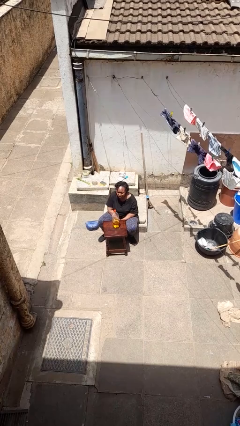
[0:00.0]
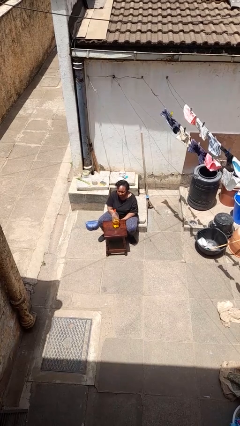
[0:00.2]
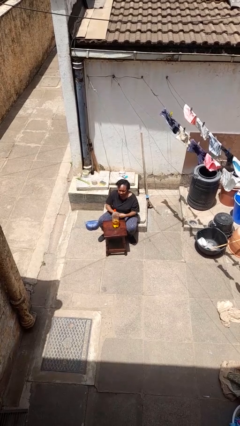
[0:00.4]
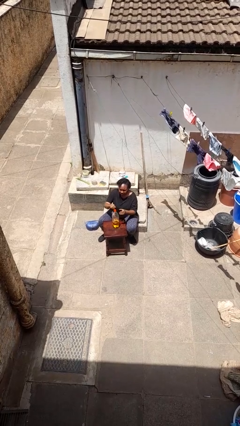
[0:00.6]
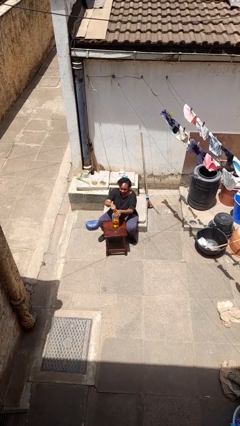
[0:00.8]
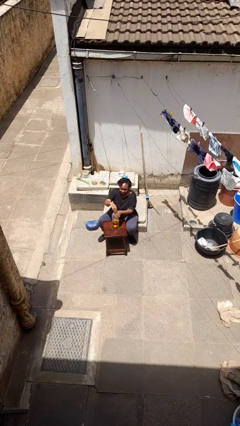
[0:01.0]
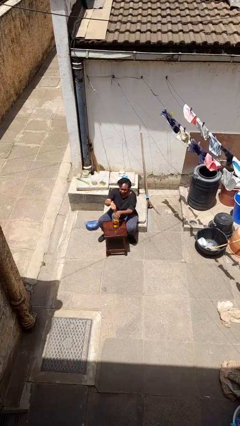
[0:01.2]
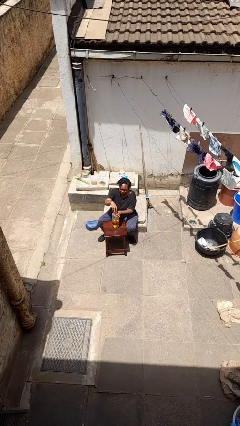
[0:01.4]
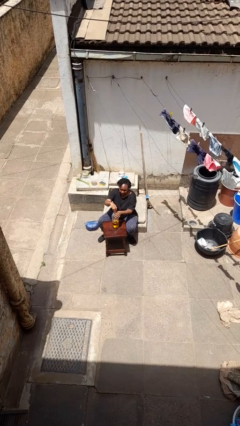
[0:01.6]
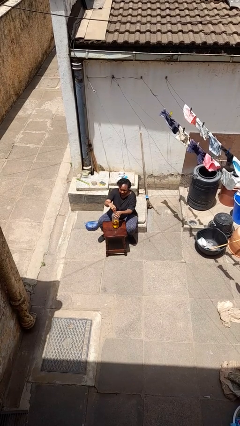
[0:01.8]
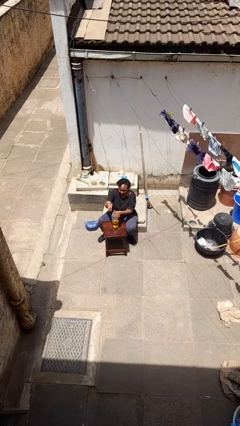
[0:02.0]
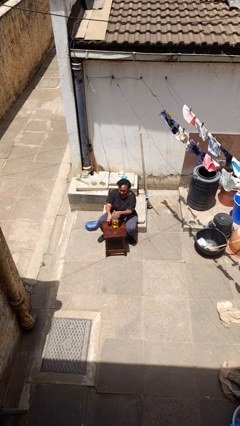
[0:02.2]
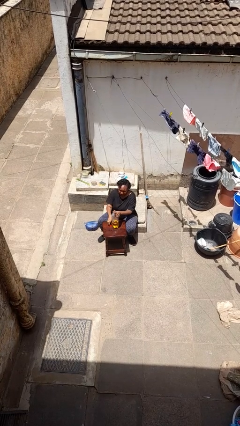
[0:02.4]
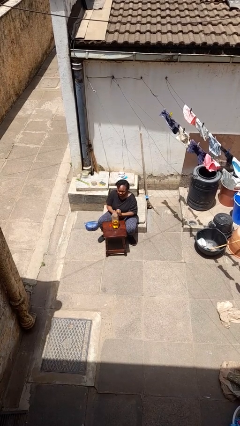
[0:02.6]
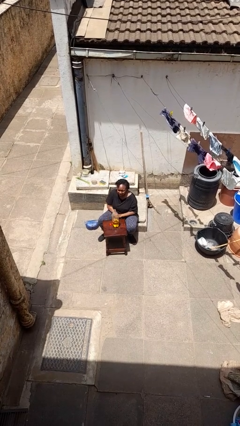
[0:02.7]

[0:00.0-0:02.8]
person unscrews lid from bottle

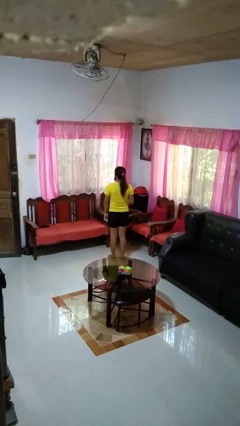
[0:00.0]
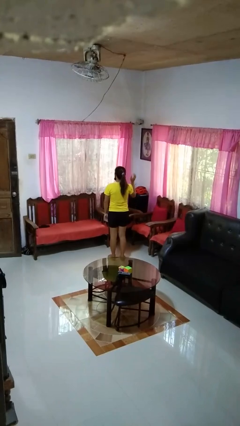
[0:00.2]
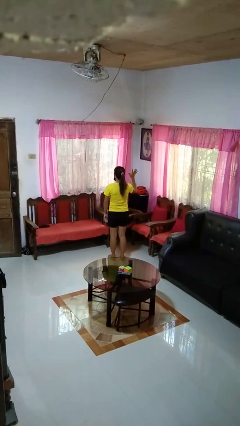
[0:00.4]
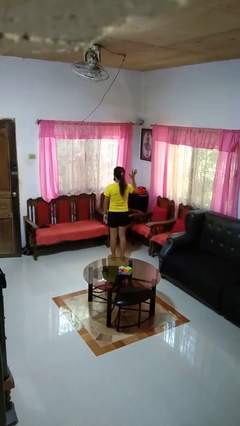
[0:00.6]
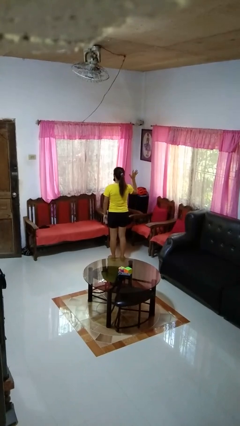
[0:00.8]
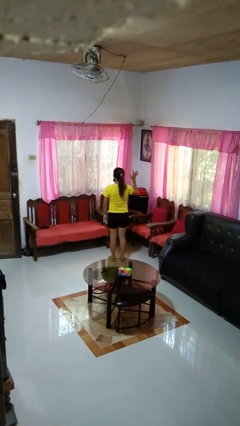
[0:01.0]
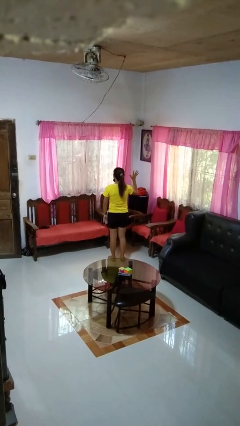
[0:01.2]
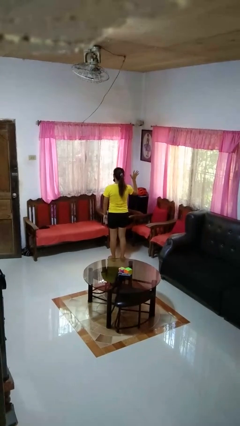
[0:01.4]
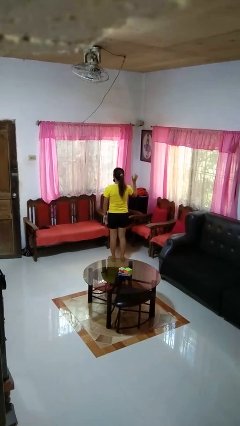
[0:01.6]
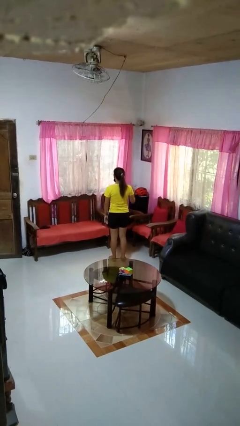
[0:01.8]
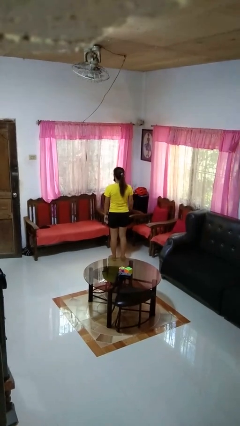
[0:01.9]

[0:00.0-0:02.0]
person gestures number five

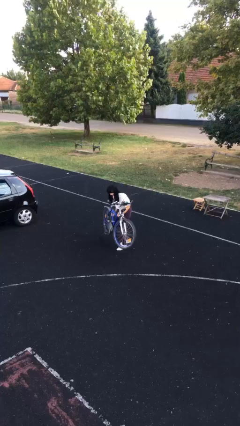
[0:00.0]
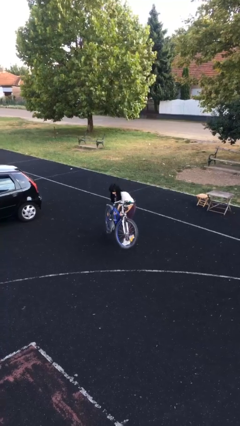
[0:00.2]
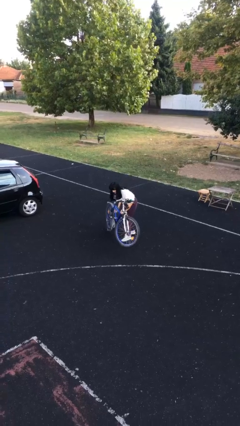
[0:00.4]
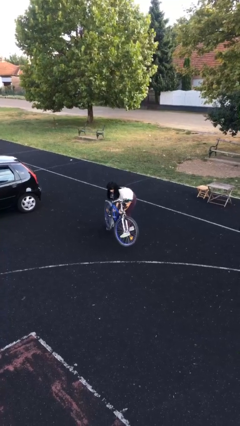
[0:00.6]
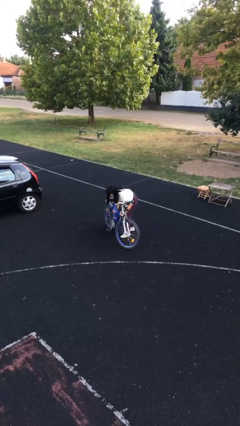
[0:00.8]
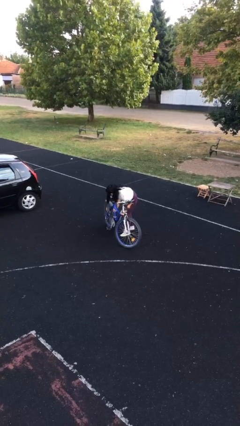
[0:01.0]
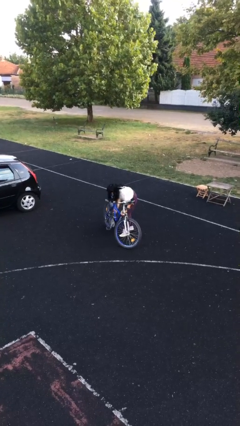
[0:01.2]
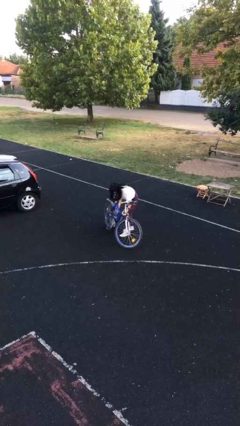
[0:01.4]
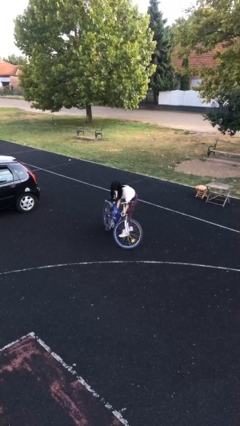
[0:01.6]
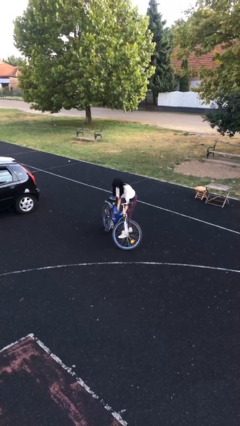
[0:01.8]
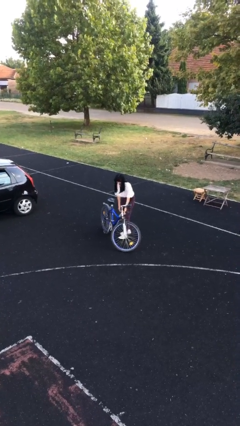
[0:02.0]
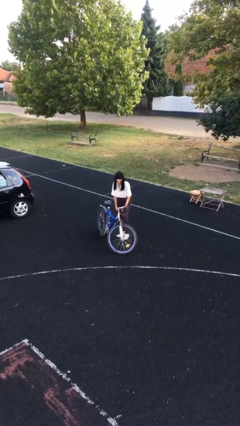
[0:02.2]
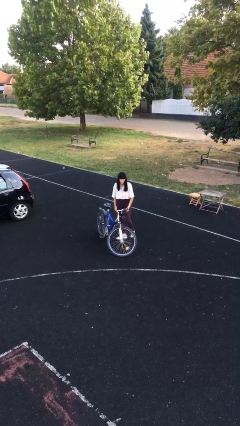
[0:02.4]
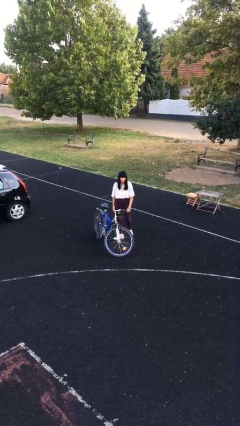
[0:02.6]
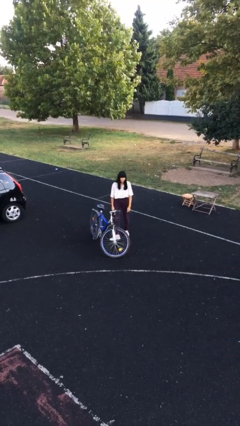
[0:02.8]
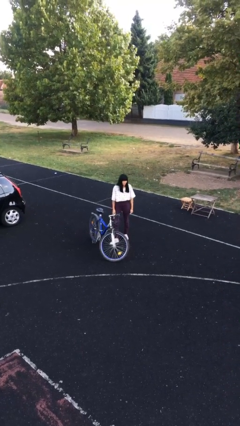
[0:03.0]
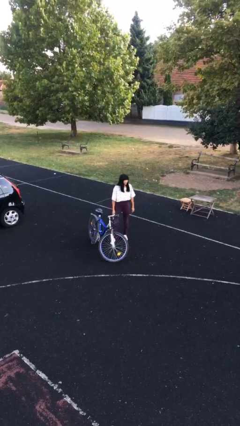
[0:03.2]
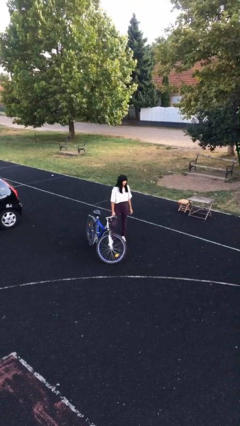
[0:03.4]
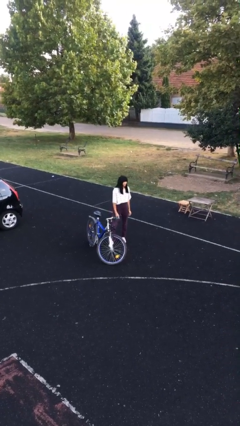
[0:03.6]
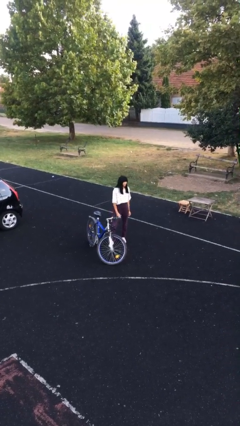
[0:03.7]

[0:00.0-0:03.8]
person puts down object on floor

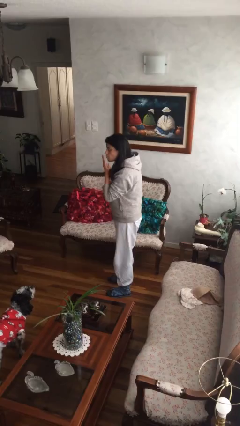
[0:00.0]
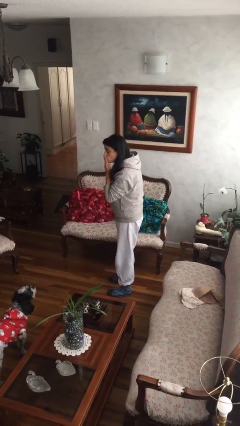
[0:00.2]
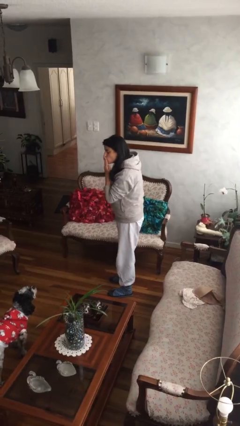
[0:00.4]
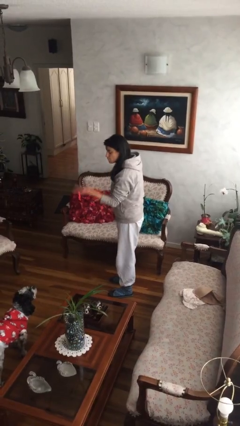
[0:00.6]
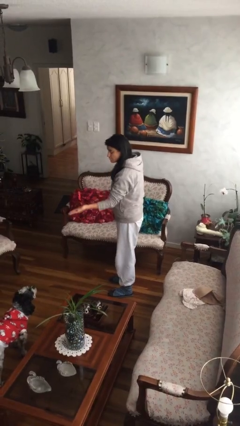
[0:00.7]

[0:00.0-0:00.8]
person gestures blow kiss

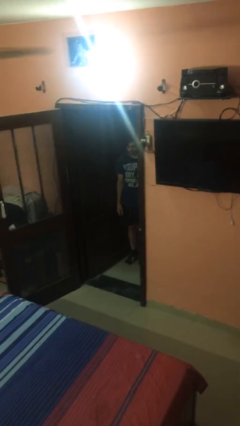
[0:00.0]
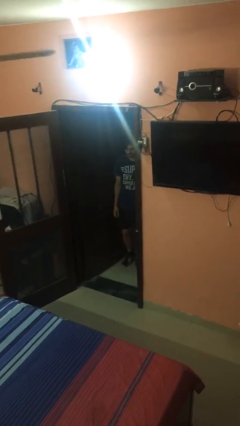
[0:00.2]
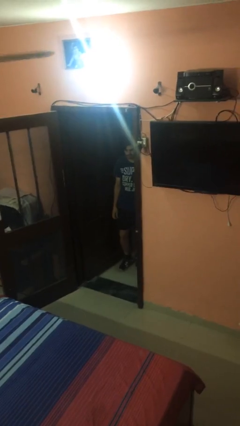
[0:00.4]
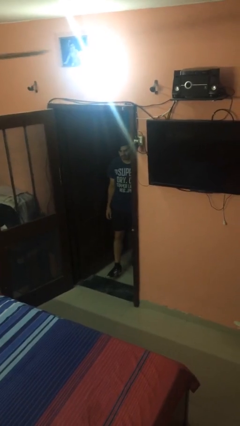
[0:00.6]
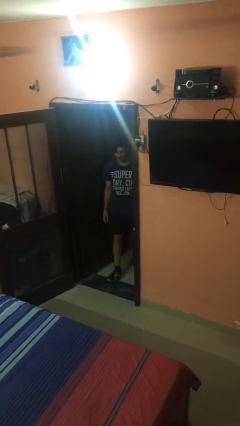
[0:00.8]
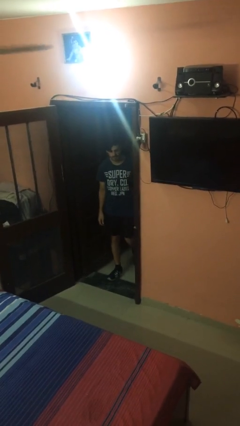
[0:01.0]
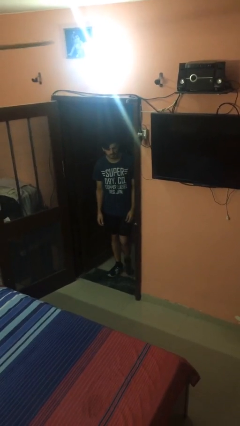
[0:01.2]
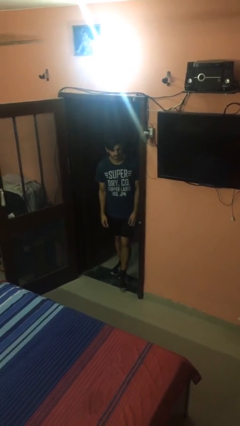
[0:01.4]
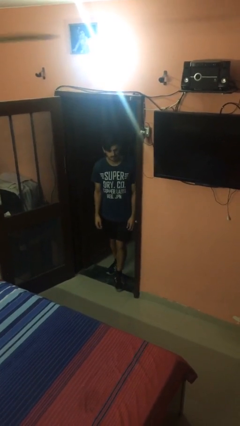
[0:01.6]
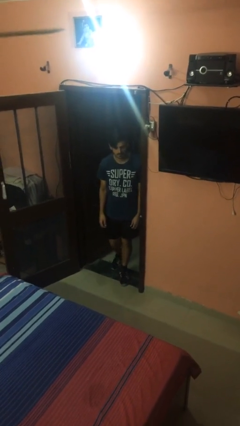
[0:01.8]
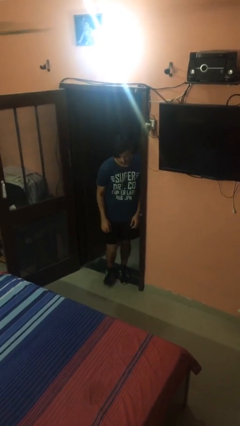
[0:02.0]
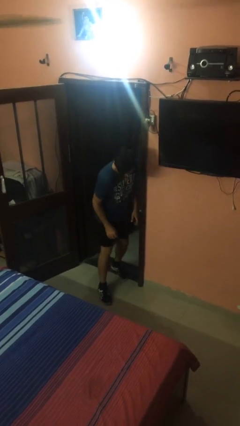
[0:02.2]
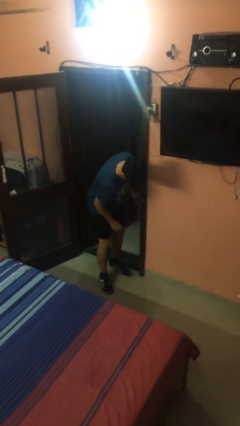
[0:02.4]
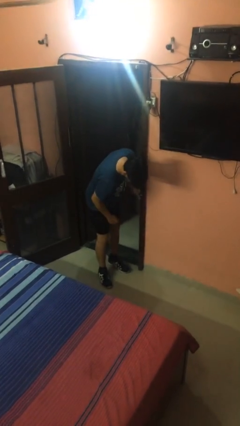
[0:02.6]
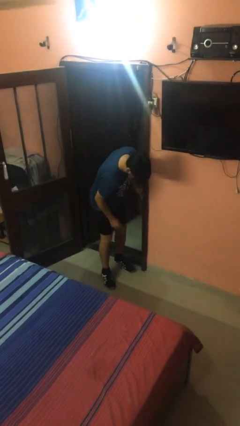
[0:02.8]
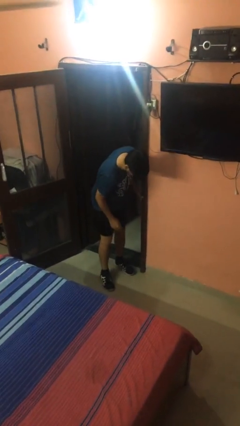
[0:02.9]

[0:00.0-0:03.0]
person bumps into wall

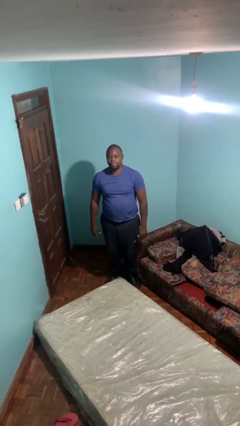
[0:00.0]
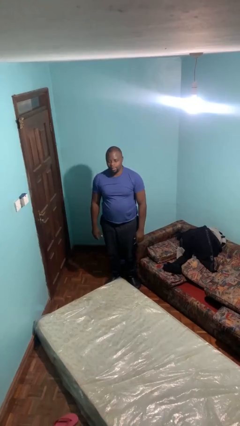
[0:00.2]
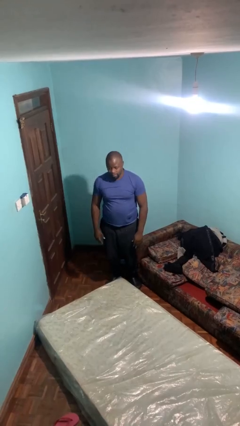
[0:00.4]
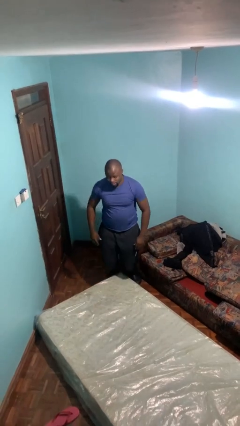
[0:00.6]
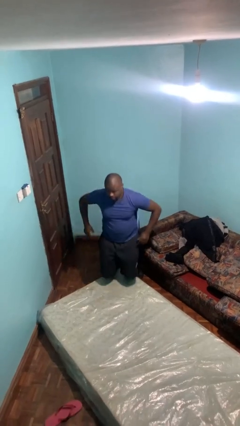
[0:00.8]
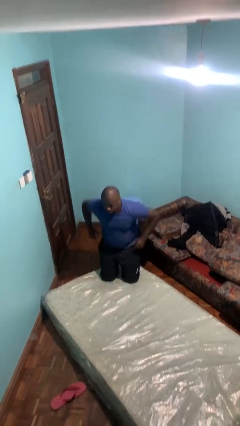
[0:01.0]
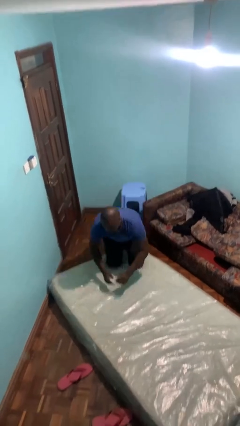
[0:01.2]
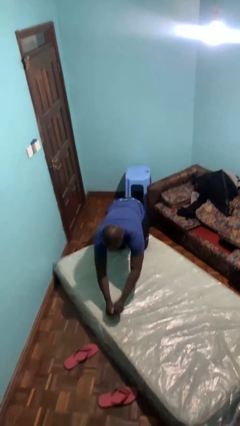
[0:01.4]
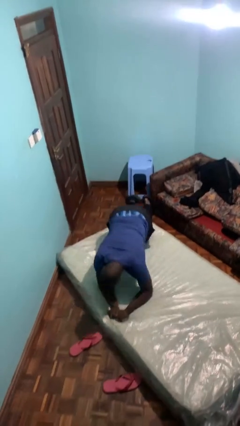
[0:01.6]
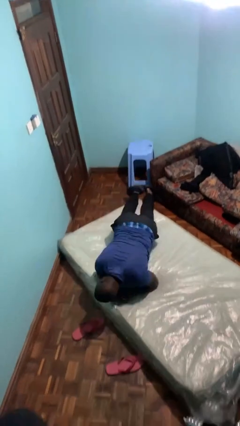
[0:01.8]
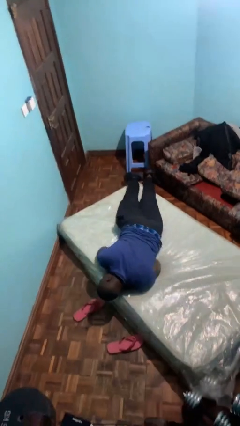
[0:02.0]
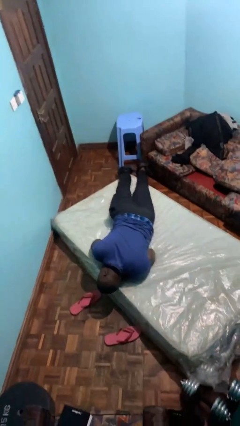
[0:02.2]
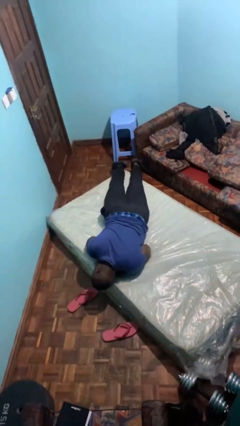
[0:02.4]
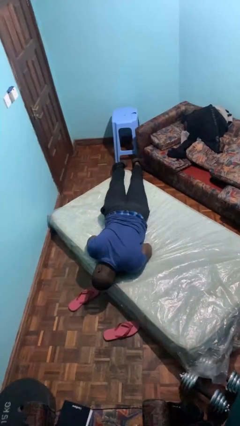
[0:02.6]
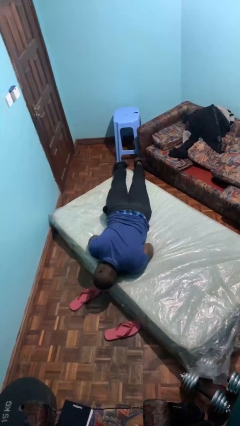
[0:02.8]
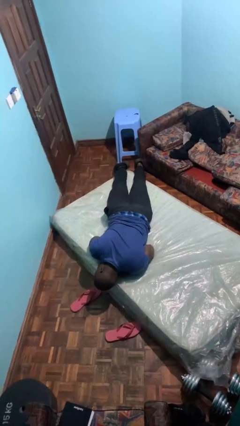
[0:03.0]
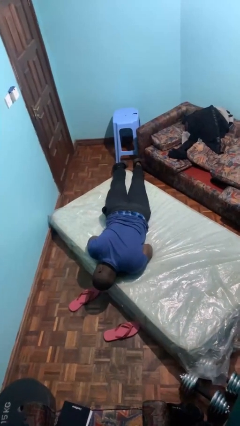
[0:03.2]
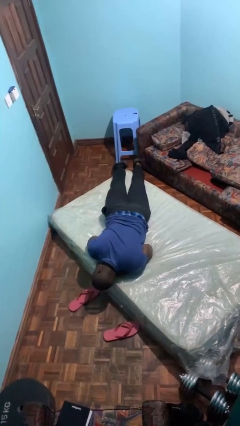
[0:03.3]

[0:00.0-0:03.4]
person lies down on bed

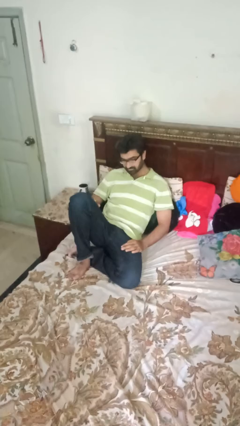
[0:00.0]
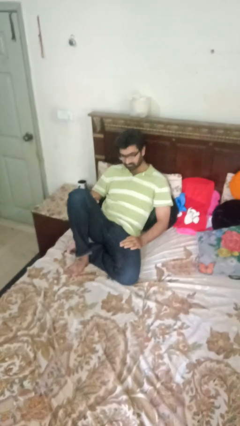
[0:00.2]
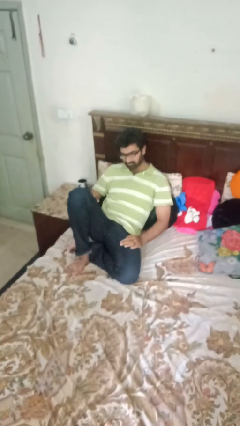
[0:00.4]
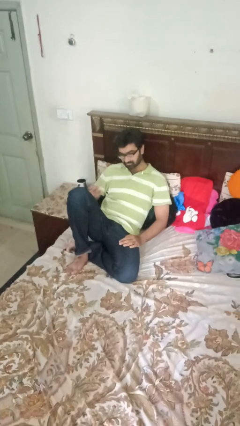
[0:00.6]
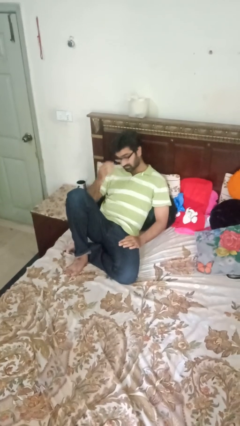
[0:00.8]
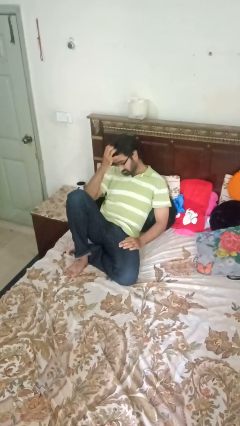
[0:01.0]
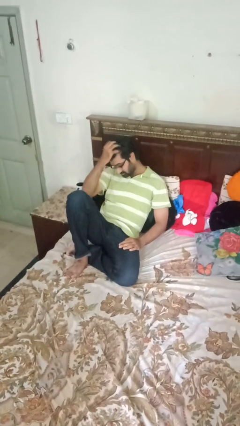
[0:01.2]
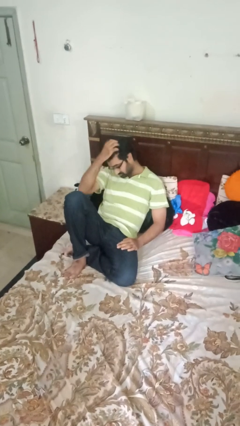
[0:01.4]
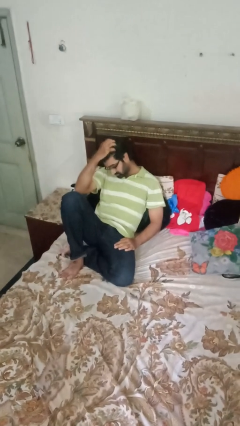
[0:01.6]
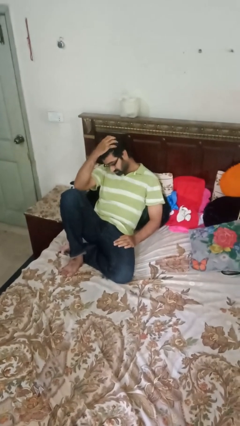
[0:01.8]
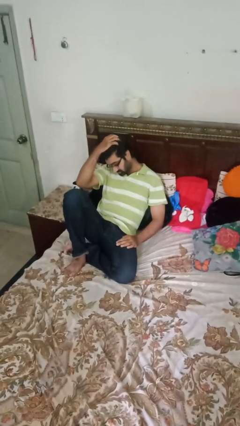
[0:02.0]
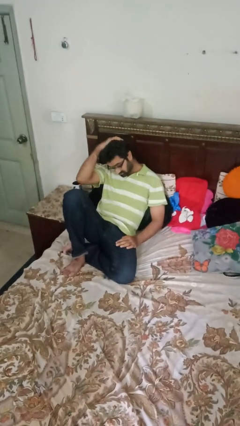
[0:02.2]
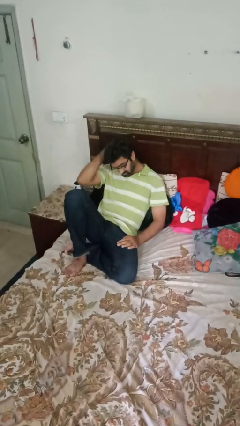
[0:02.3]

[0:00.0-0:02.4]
person strokes hair
